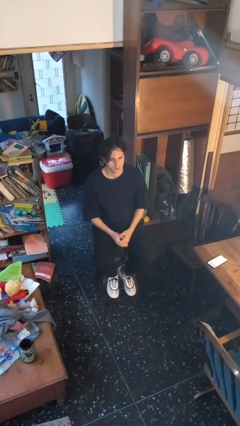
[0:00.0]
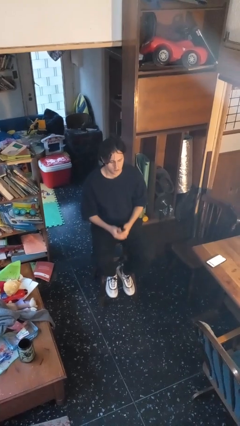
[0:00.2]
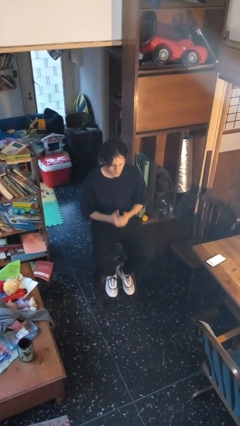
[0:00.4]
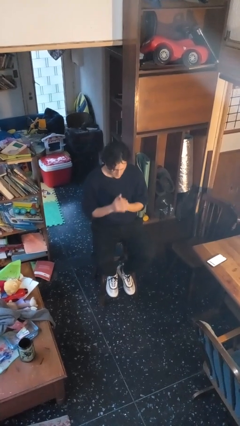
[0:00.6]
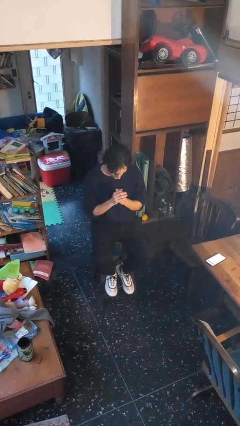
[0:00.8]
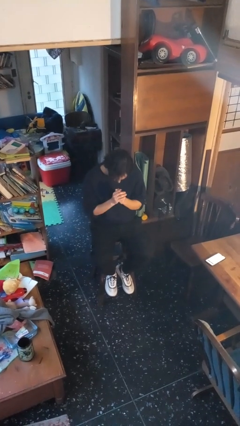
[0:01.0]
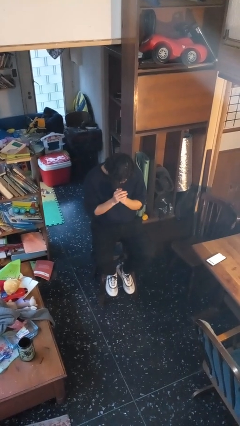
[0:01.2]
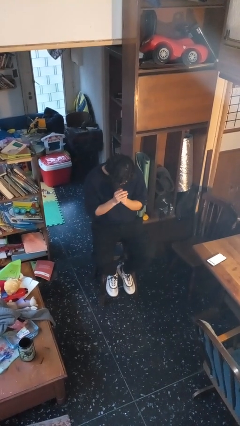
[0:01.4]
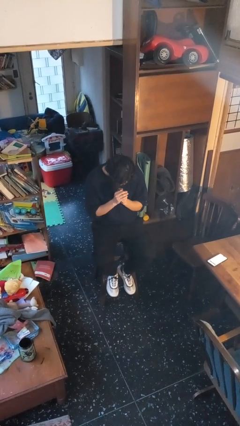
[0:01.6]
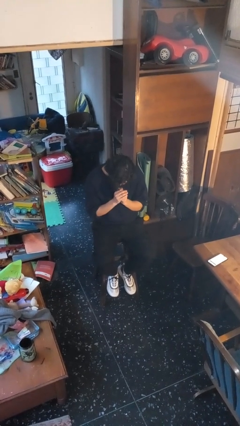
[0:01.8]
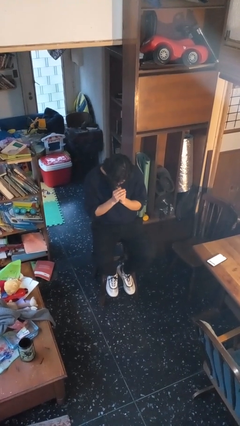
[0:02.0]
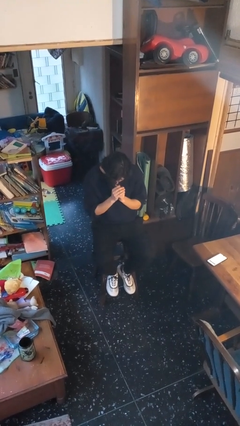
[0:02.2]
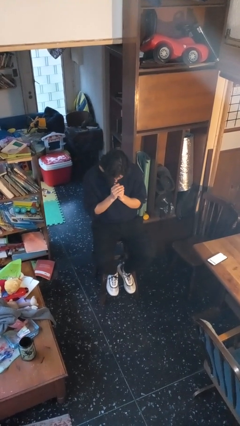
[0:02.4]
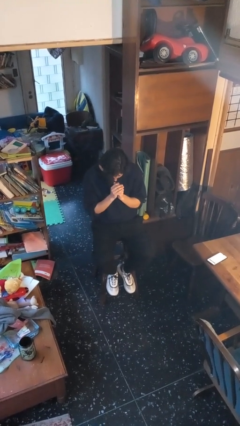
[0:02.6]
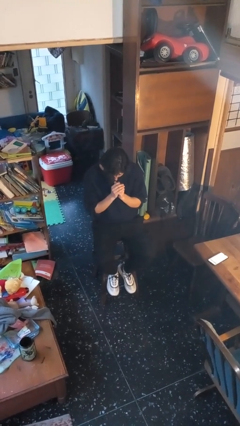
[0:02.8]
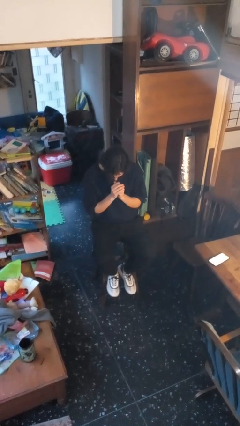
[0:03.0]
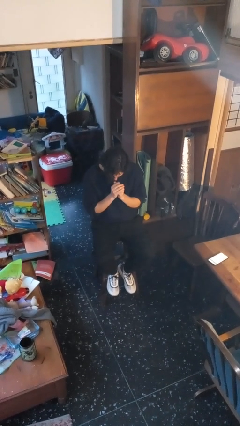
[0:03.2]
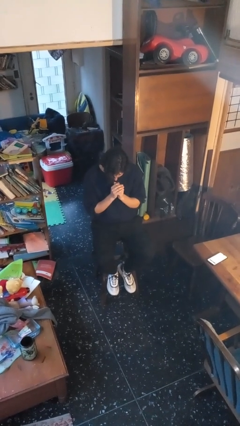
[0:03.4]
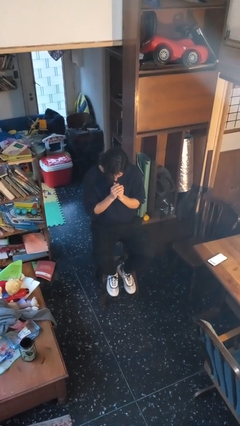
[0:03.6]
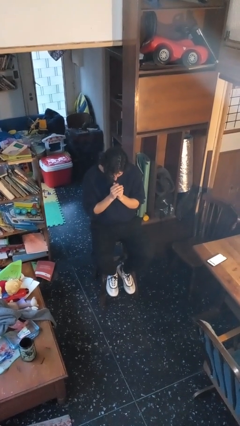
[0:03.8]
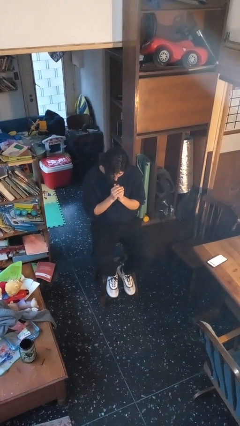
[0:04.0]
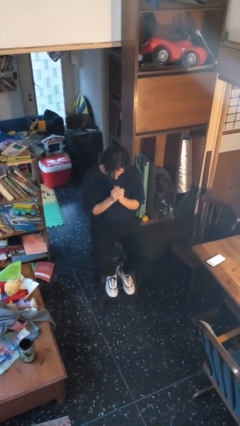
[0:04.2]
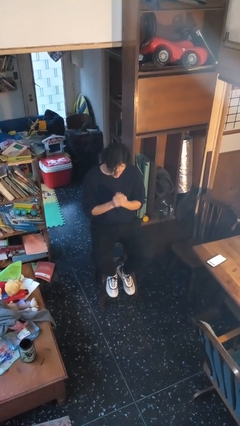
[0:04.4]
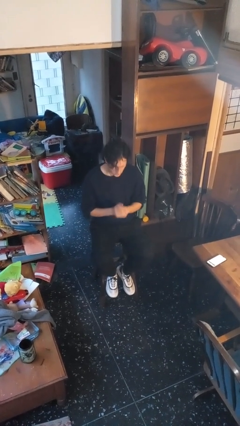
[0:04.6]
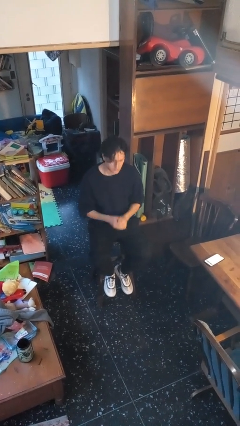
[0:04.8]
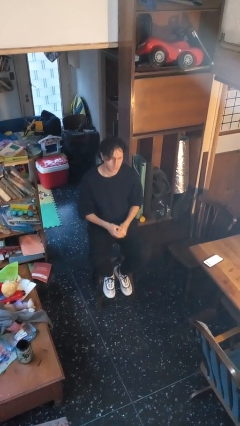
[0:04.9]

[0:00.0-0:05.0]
person prays

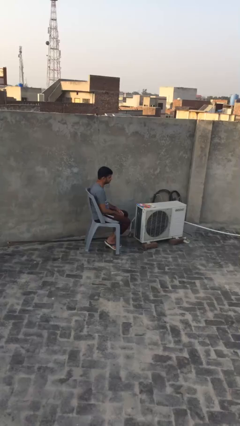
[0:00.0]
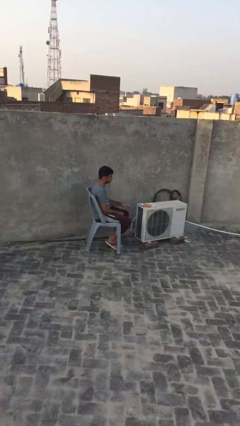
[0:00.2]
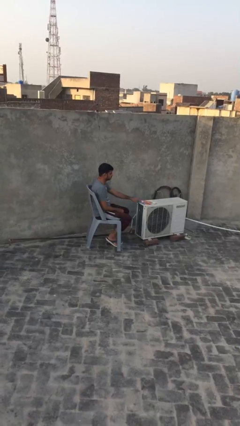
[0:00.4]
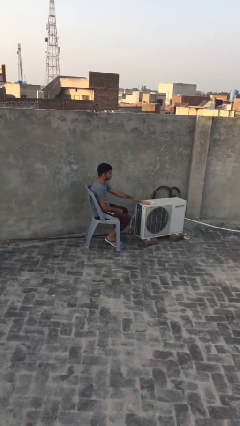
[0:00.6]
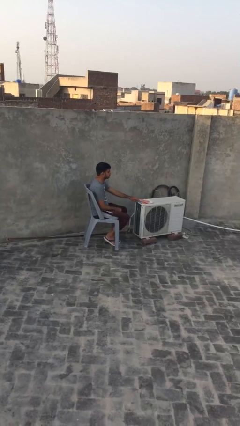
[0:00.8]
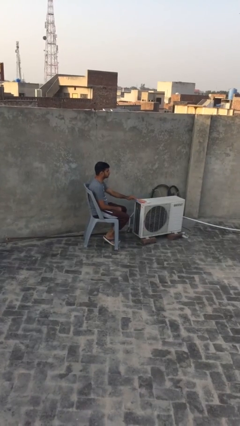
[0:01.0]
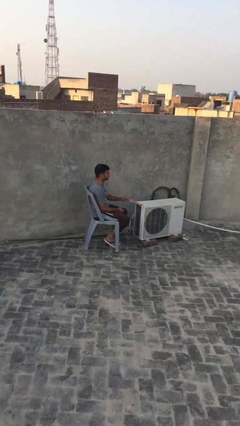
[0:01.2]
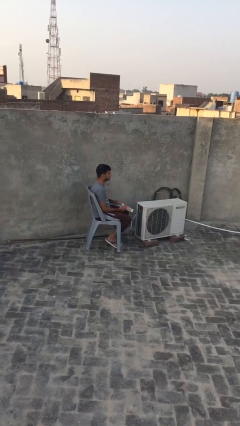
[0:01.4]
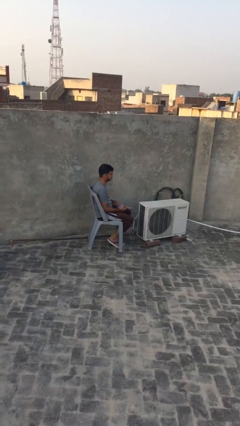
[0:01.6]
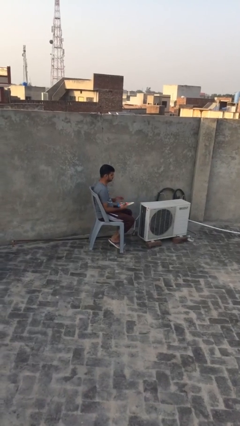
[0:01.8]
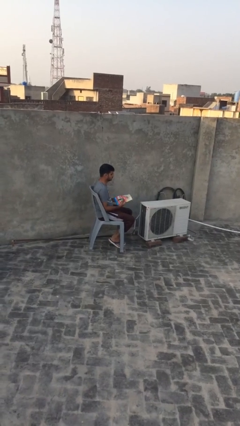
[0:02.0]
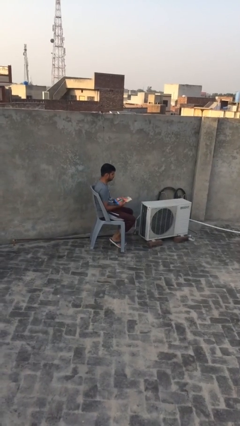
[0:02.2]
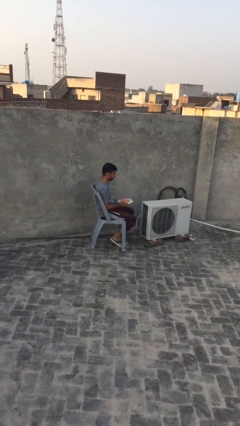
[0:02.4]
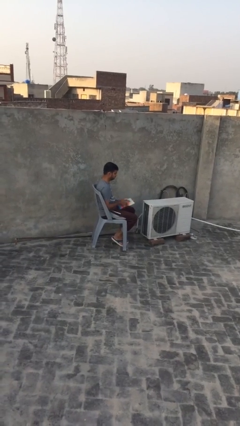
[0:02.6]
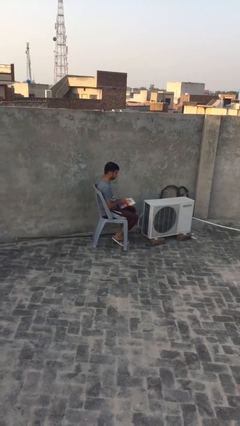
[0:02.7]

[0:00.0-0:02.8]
person picks up object from table

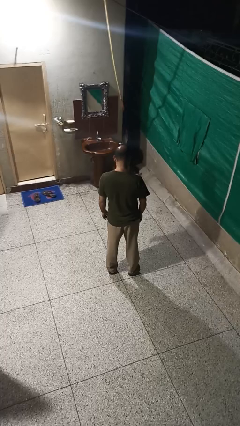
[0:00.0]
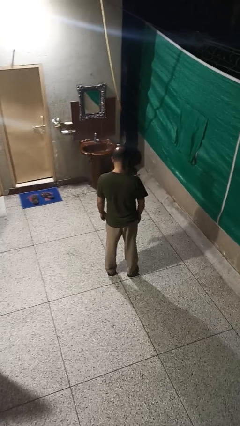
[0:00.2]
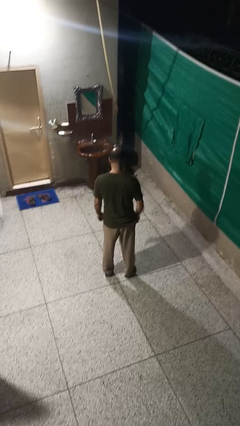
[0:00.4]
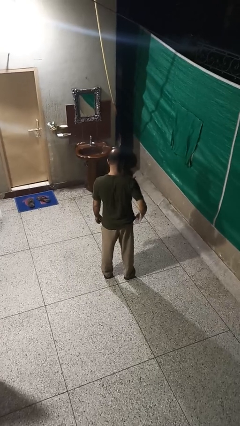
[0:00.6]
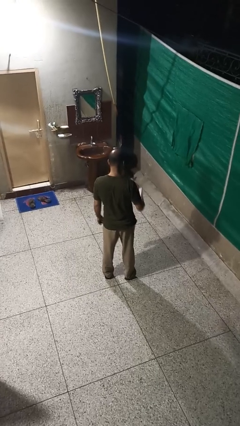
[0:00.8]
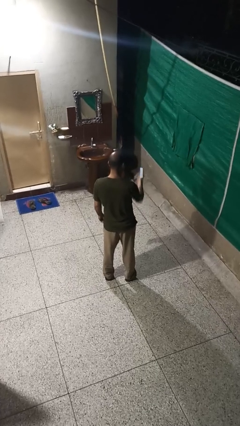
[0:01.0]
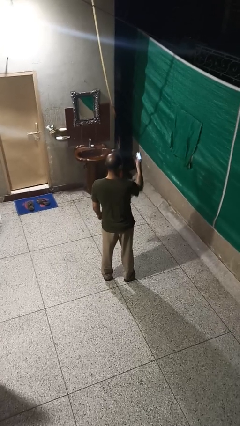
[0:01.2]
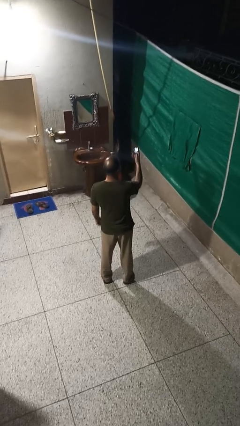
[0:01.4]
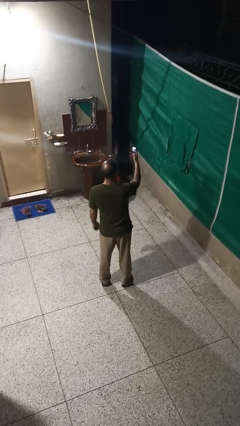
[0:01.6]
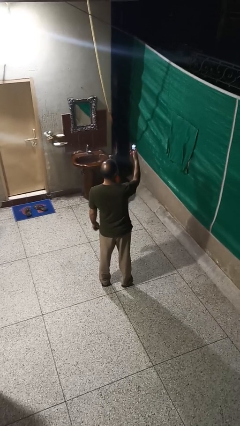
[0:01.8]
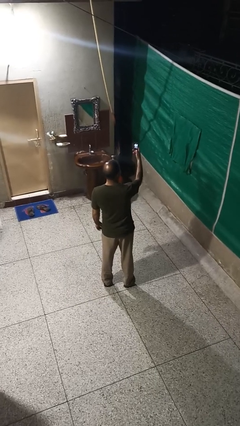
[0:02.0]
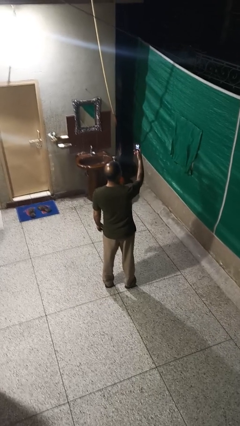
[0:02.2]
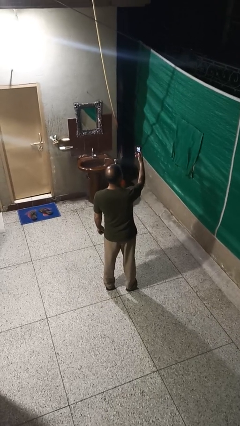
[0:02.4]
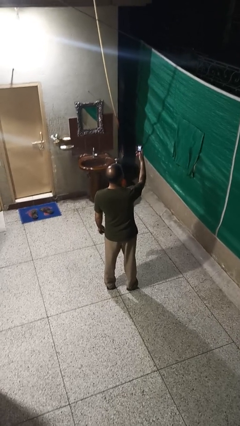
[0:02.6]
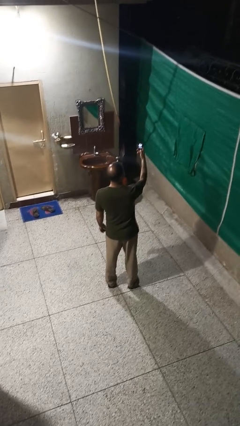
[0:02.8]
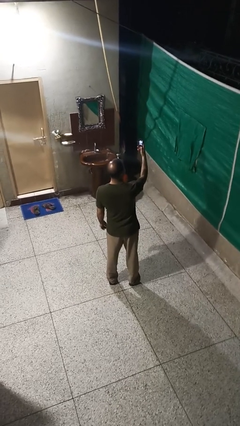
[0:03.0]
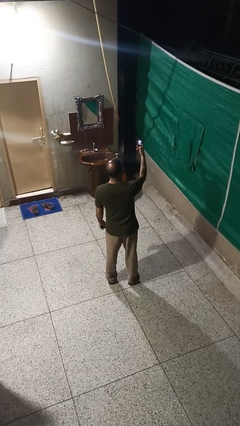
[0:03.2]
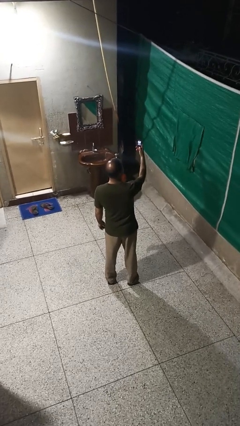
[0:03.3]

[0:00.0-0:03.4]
person takes phone from pocket

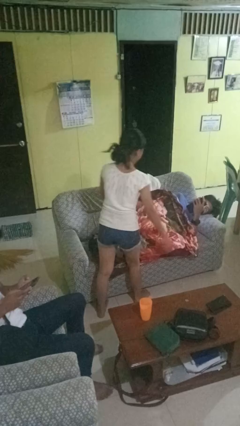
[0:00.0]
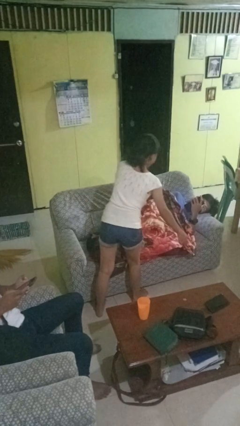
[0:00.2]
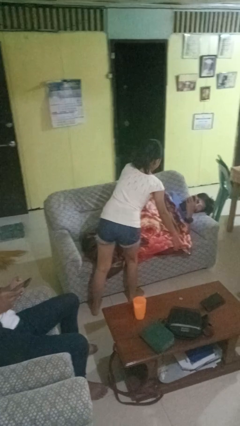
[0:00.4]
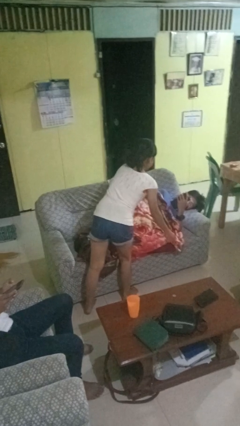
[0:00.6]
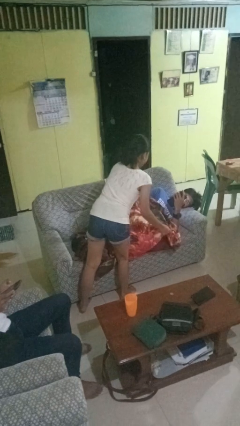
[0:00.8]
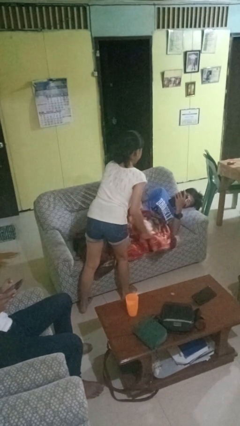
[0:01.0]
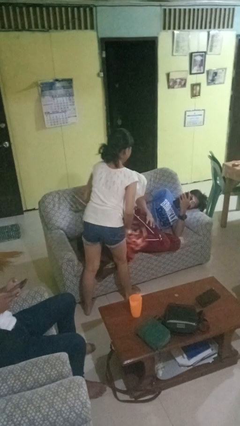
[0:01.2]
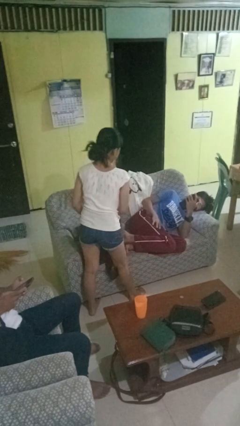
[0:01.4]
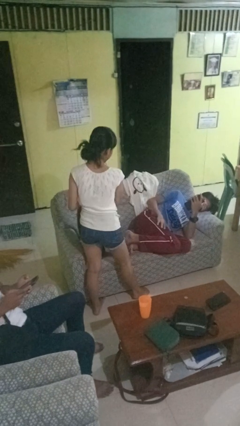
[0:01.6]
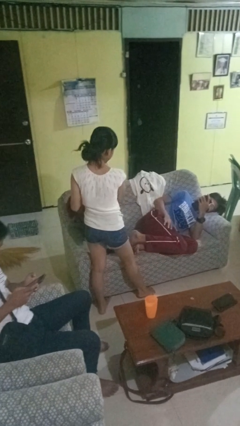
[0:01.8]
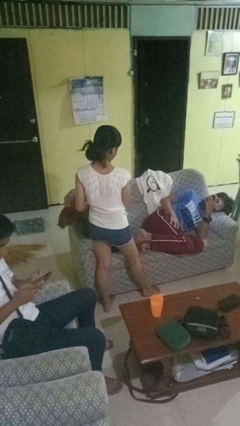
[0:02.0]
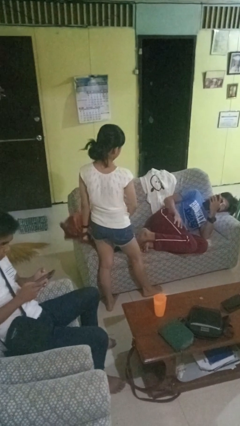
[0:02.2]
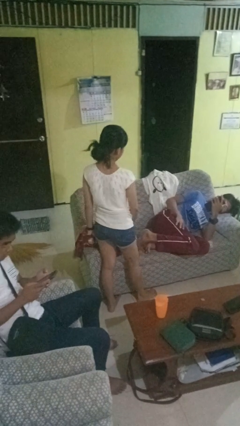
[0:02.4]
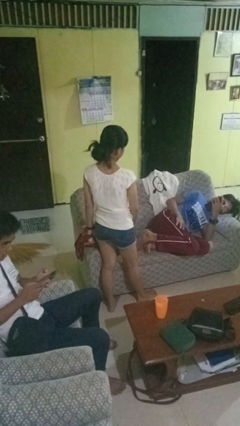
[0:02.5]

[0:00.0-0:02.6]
person uncovers friend with blanket

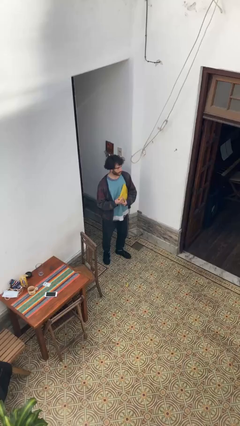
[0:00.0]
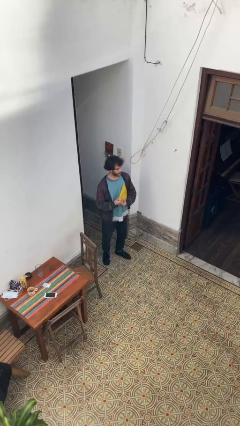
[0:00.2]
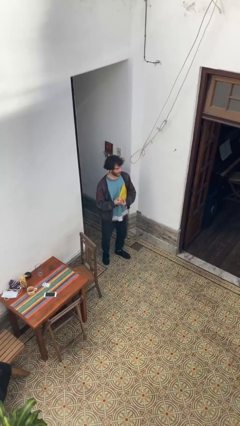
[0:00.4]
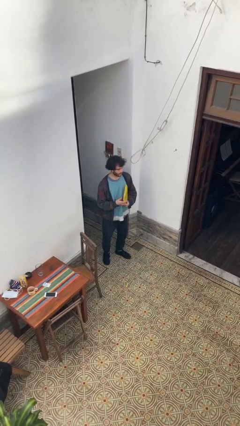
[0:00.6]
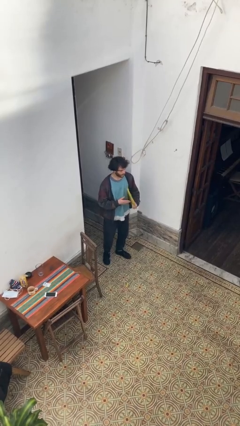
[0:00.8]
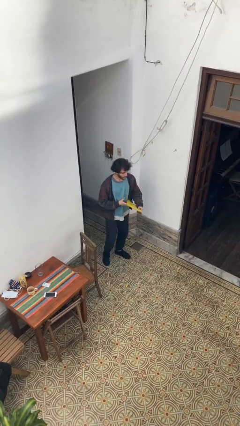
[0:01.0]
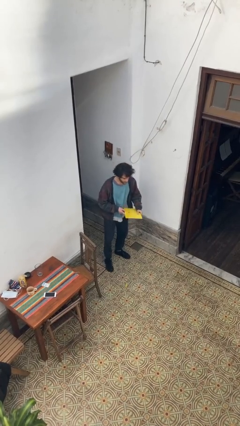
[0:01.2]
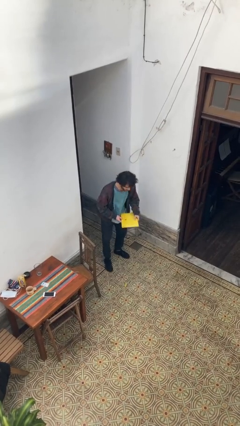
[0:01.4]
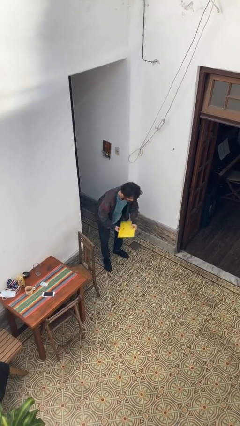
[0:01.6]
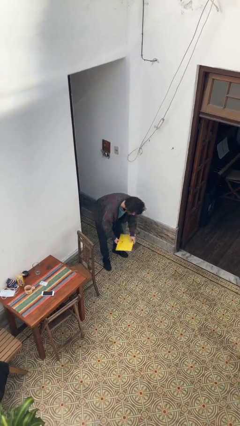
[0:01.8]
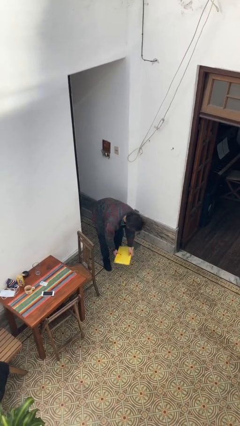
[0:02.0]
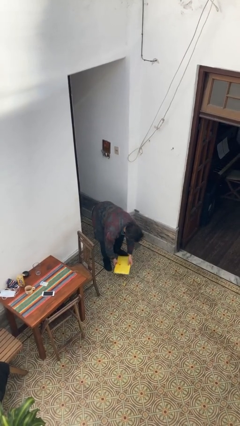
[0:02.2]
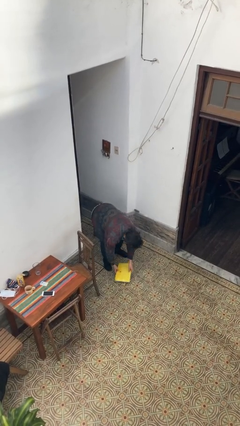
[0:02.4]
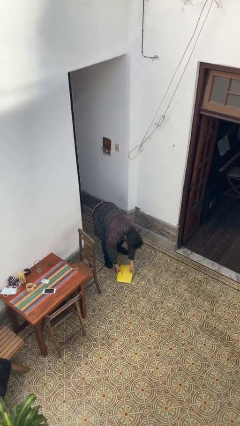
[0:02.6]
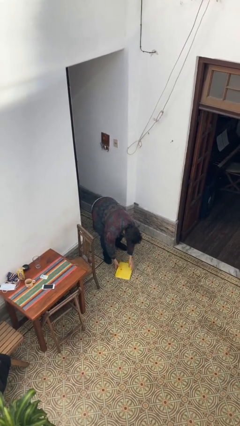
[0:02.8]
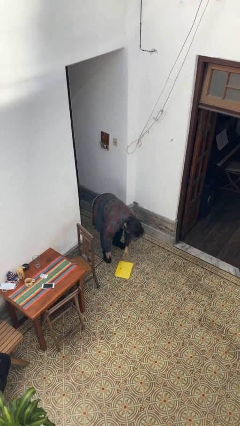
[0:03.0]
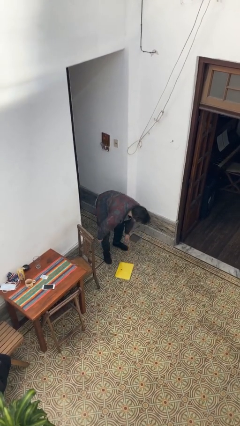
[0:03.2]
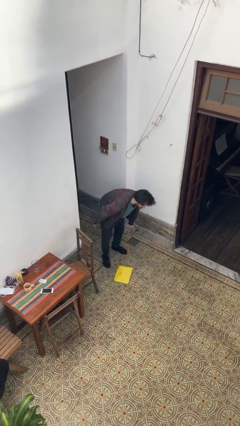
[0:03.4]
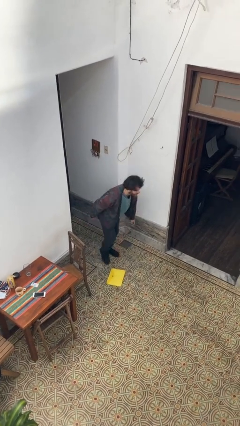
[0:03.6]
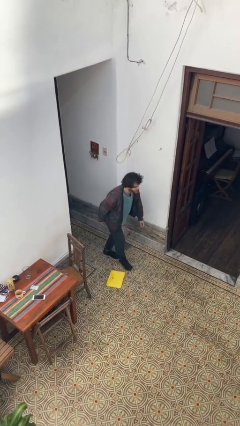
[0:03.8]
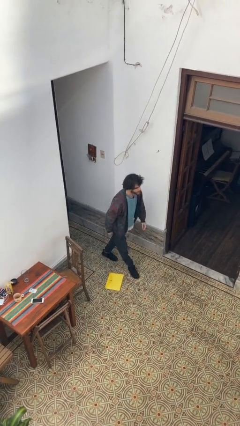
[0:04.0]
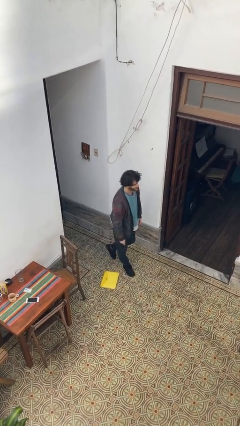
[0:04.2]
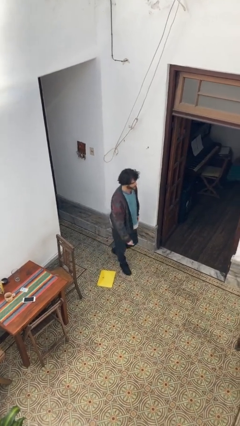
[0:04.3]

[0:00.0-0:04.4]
person puts down object on floor
